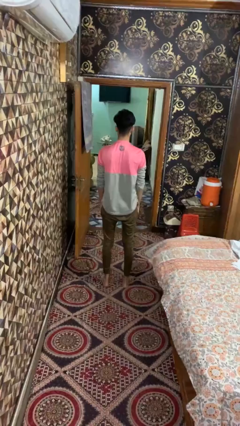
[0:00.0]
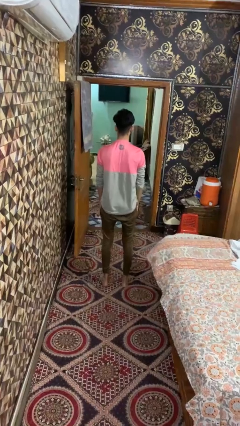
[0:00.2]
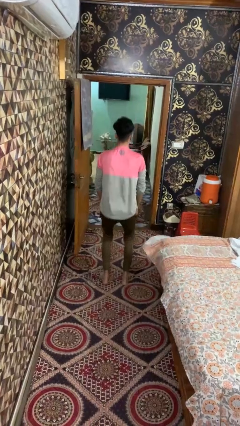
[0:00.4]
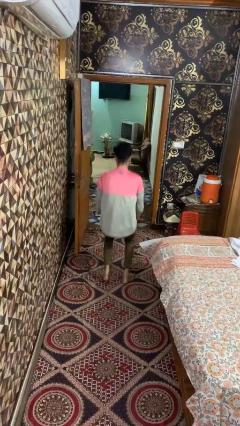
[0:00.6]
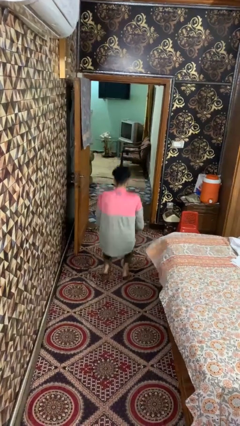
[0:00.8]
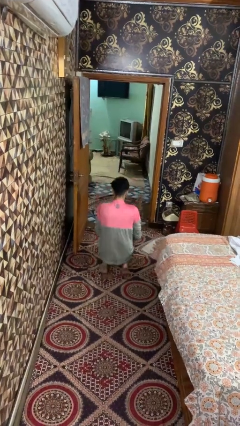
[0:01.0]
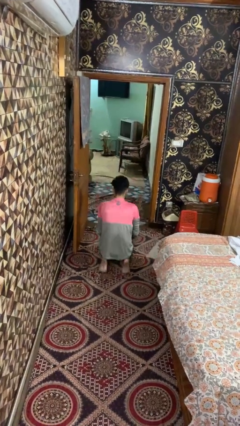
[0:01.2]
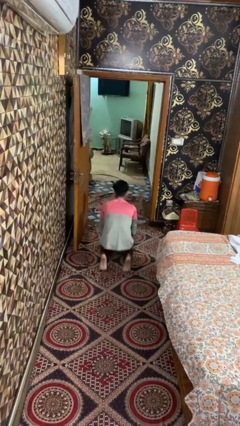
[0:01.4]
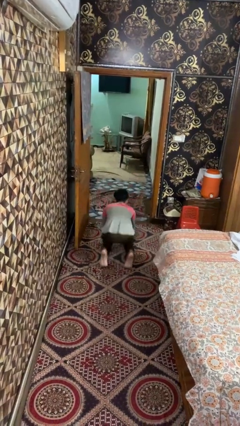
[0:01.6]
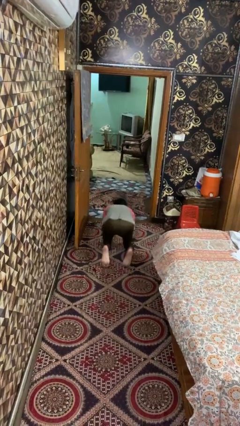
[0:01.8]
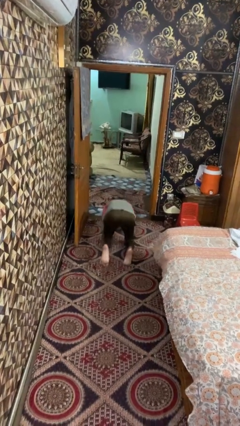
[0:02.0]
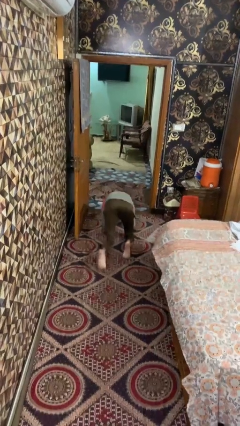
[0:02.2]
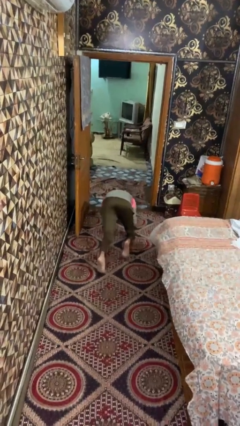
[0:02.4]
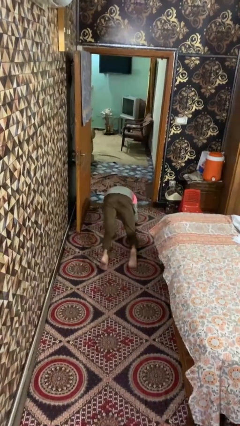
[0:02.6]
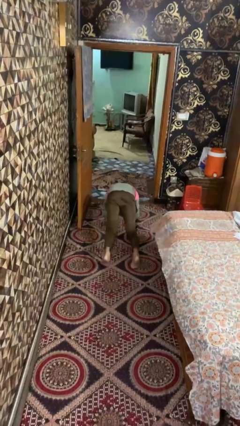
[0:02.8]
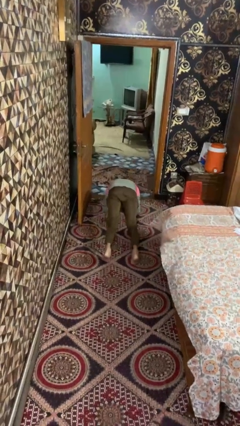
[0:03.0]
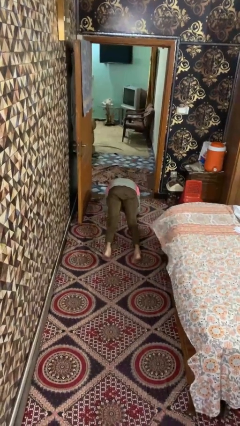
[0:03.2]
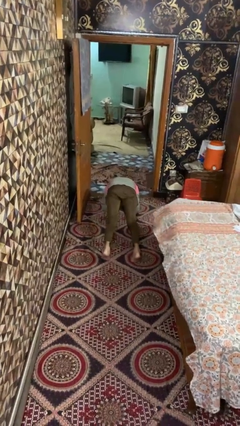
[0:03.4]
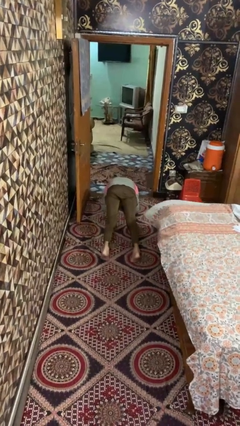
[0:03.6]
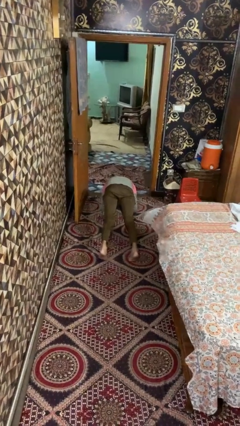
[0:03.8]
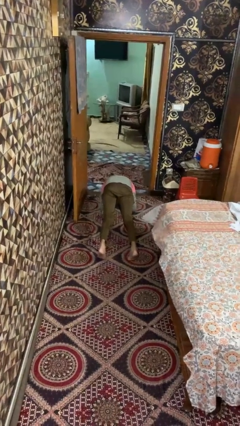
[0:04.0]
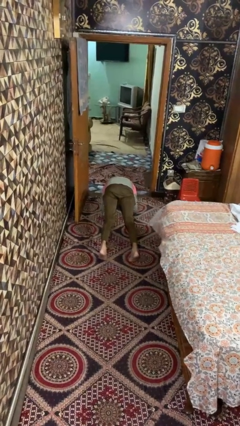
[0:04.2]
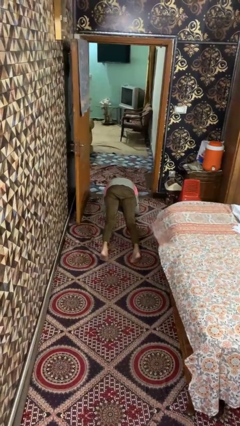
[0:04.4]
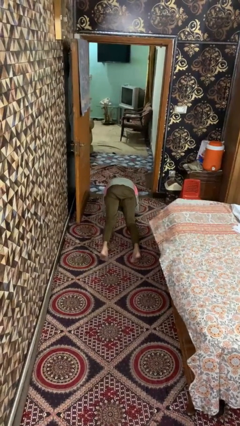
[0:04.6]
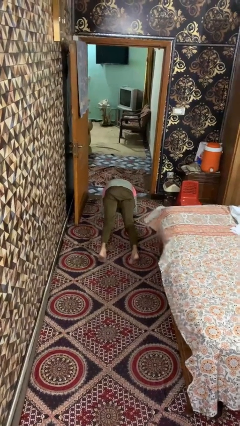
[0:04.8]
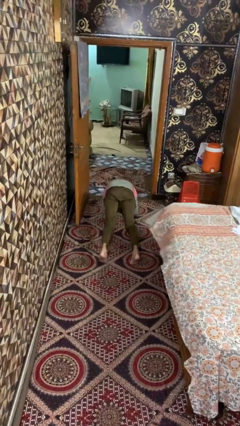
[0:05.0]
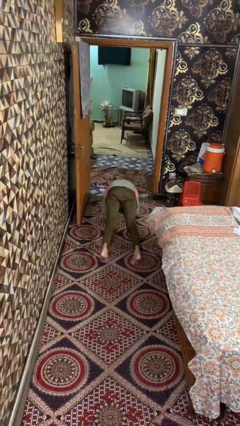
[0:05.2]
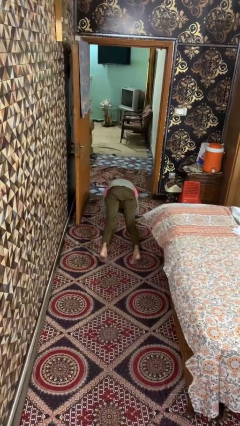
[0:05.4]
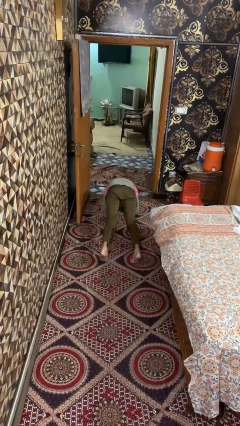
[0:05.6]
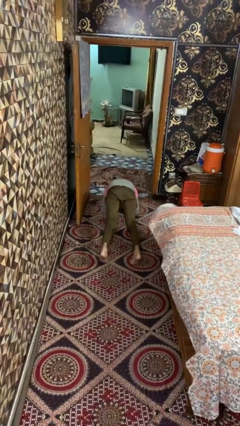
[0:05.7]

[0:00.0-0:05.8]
person exercises with plank

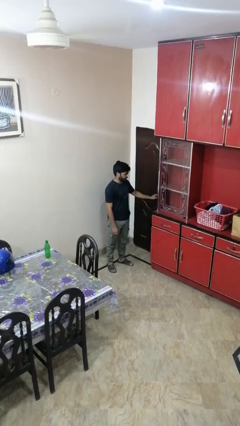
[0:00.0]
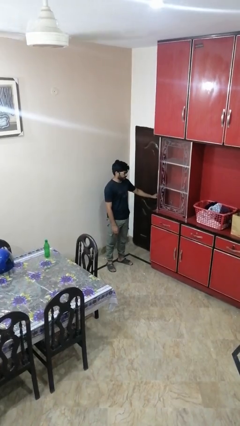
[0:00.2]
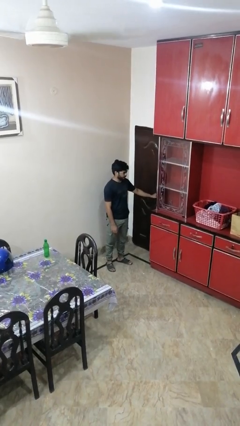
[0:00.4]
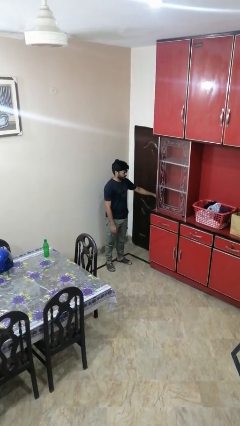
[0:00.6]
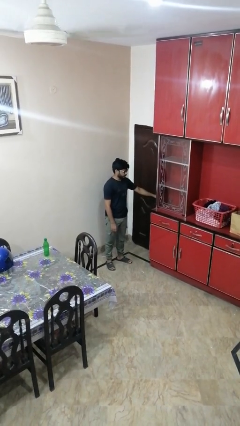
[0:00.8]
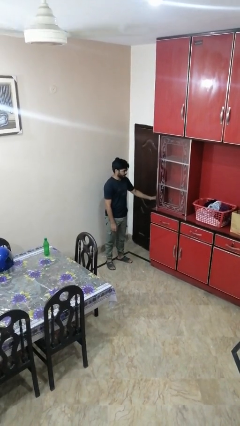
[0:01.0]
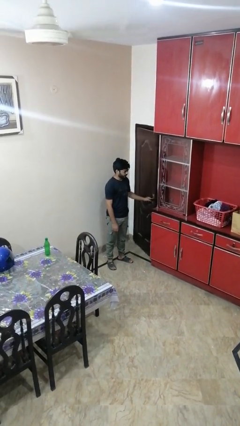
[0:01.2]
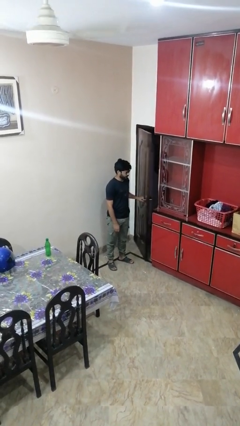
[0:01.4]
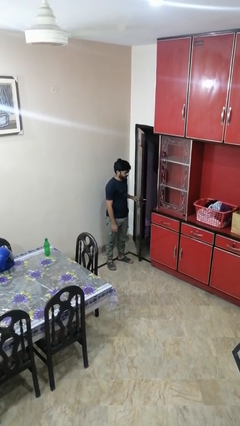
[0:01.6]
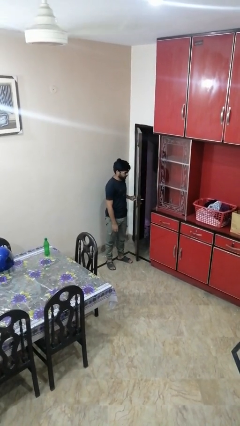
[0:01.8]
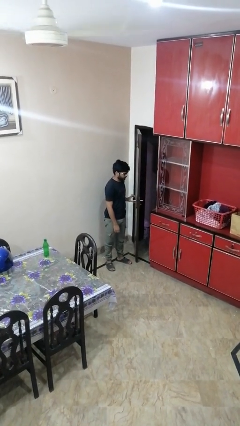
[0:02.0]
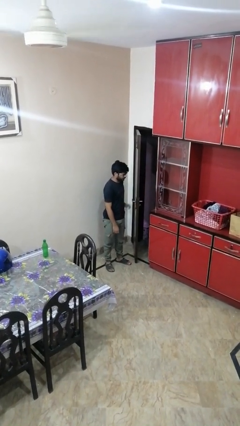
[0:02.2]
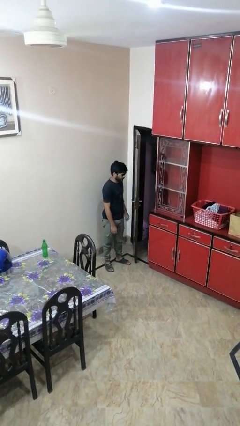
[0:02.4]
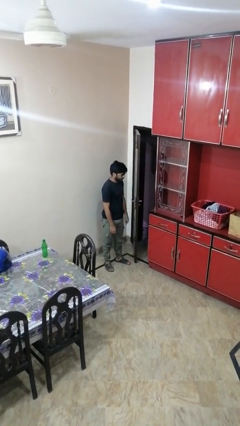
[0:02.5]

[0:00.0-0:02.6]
person opens facility door

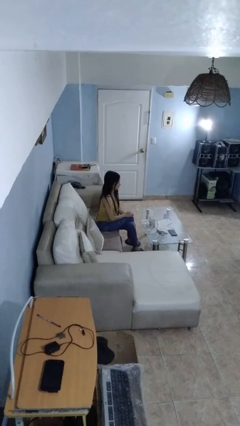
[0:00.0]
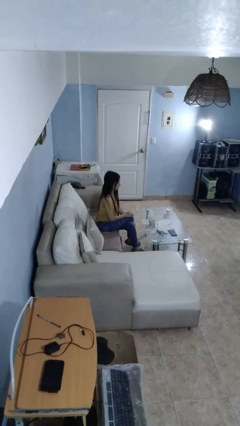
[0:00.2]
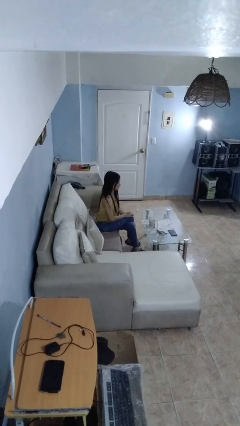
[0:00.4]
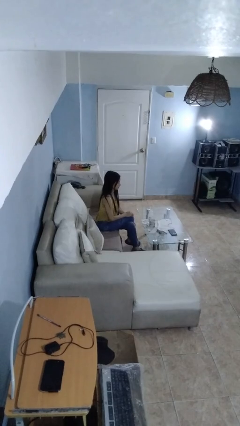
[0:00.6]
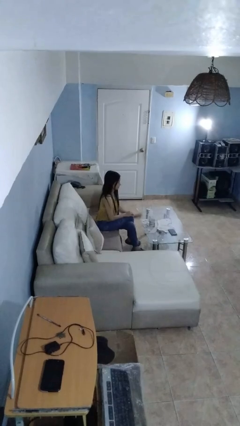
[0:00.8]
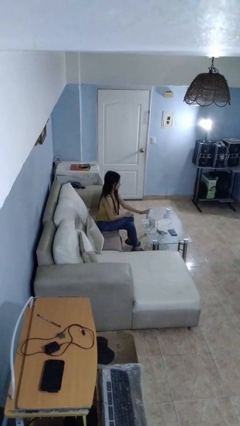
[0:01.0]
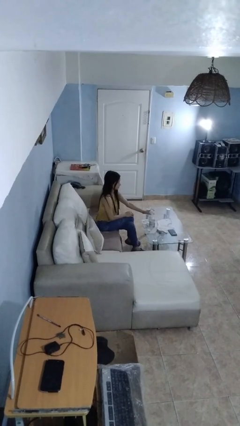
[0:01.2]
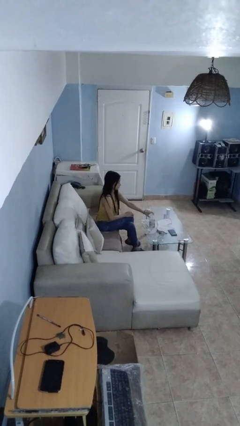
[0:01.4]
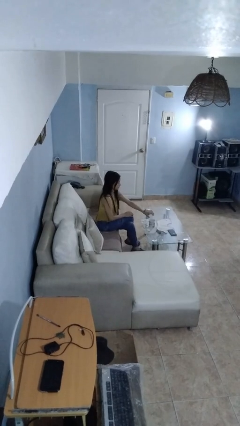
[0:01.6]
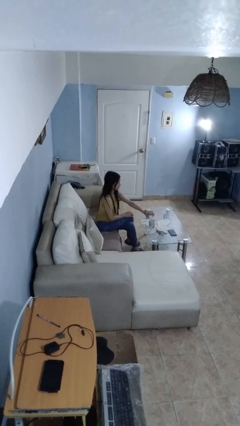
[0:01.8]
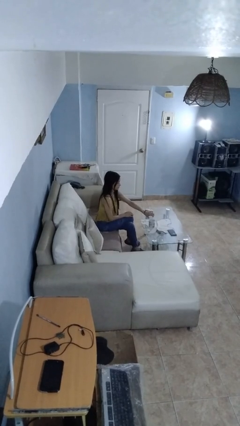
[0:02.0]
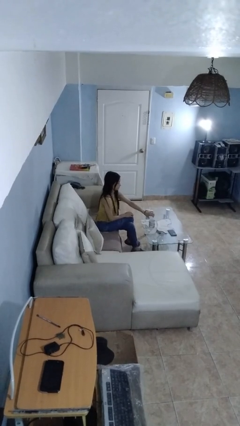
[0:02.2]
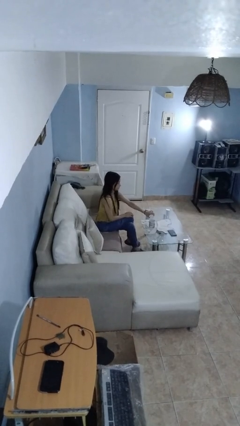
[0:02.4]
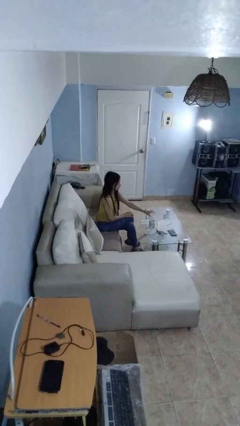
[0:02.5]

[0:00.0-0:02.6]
person pours liquid into cup

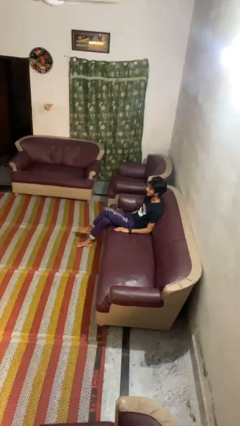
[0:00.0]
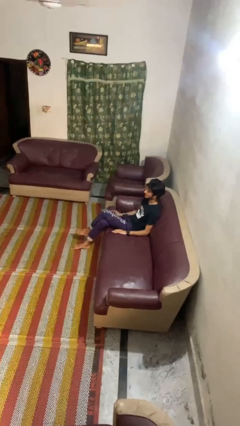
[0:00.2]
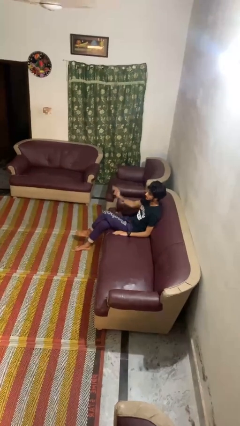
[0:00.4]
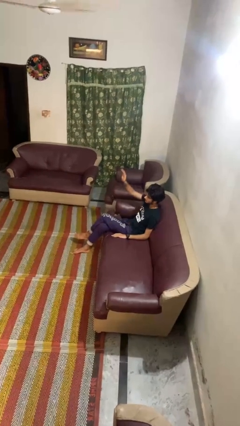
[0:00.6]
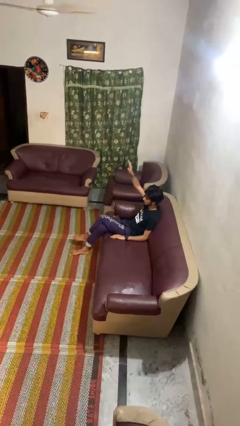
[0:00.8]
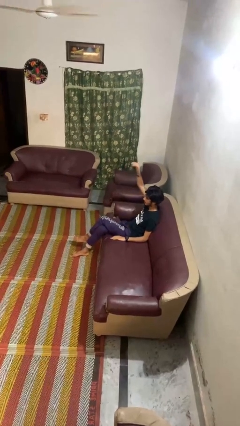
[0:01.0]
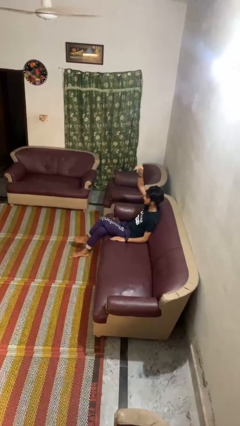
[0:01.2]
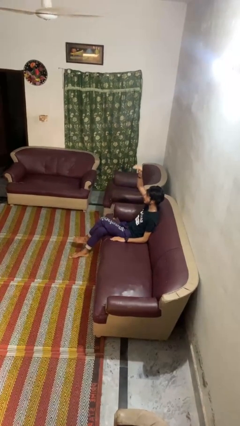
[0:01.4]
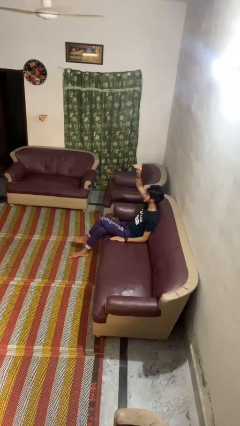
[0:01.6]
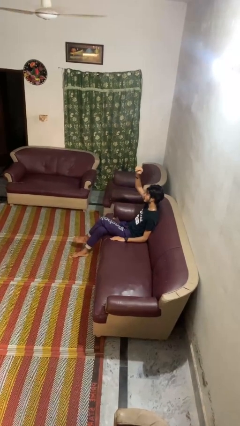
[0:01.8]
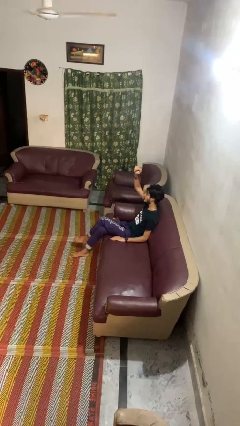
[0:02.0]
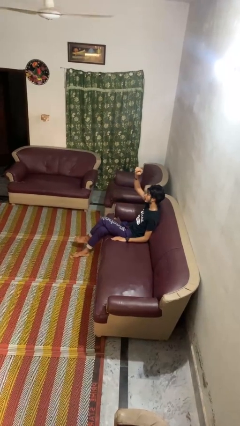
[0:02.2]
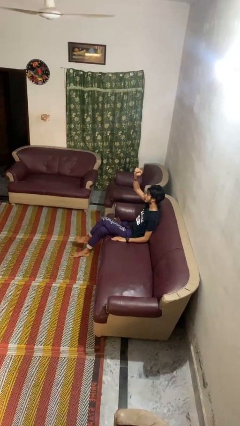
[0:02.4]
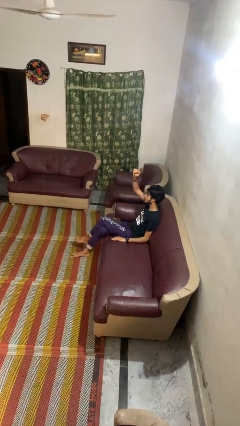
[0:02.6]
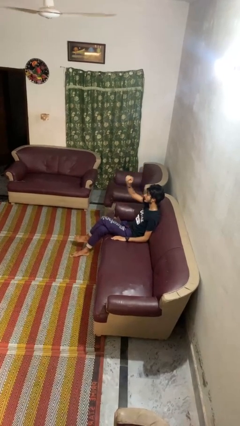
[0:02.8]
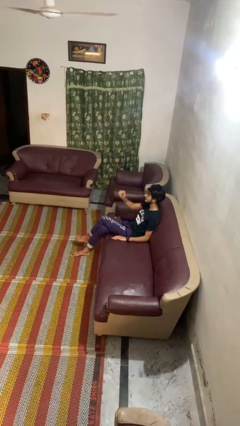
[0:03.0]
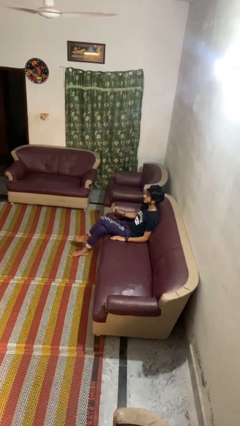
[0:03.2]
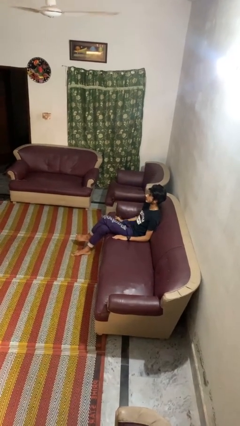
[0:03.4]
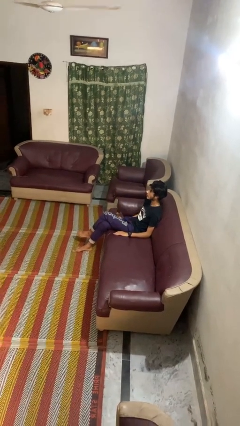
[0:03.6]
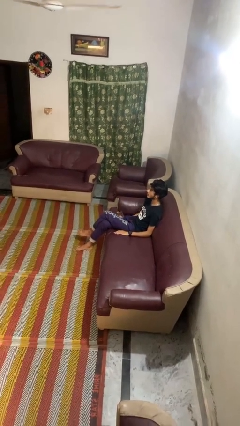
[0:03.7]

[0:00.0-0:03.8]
person gestures come here

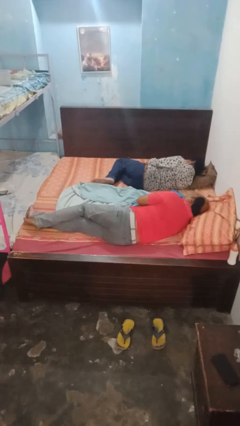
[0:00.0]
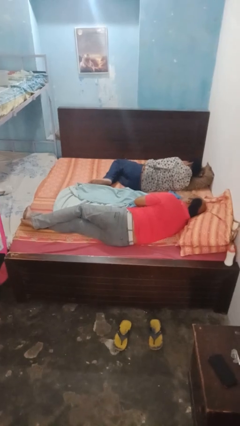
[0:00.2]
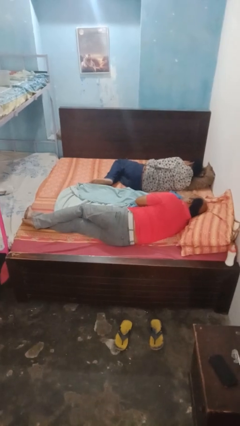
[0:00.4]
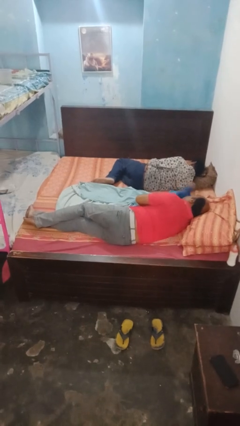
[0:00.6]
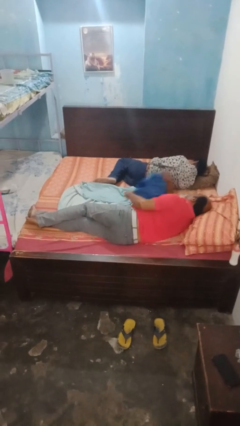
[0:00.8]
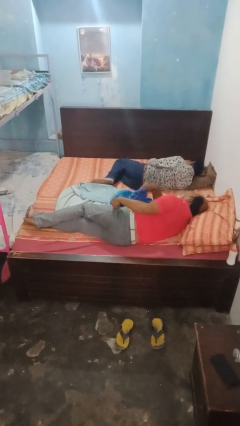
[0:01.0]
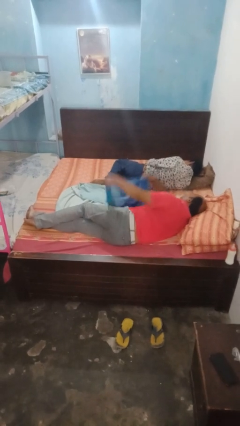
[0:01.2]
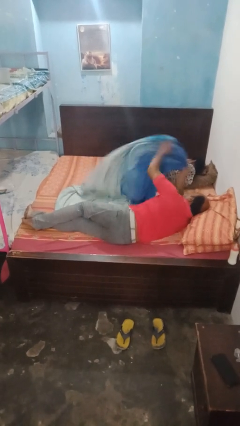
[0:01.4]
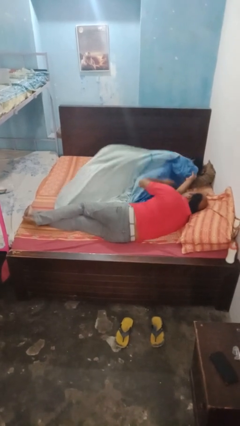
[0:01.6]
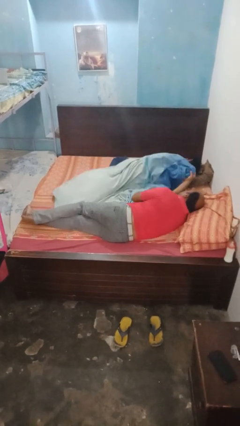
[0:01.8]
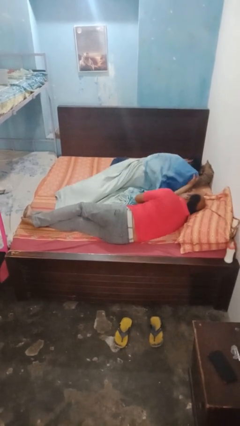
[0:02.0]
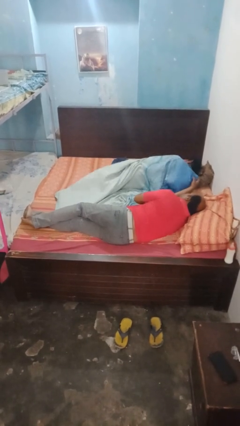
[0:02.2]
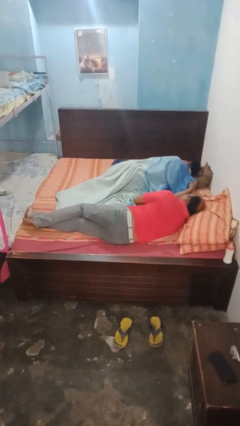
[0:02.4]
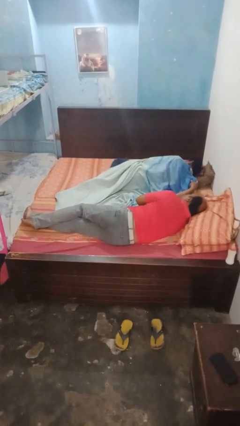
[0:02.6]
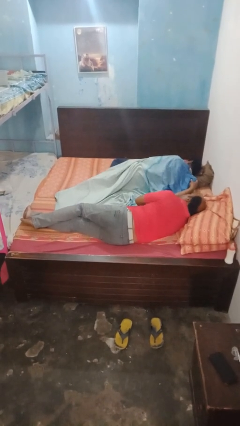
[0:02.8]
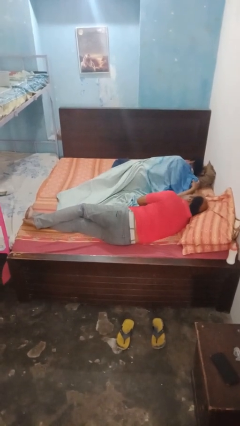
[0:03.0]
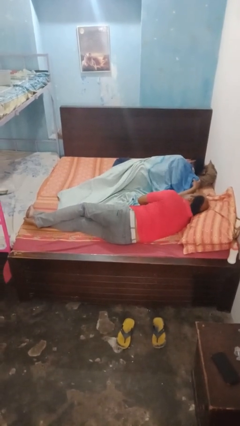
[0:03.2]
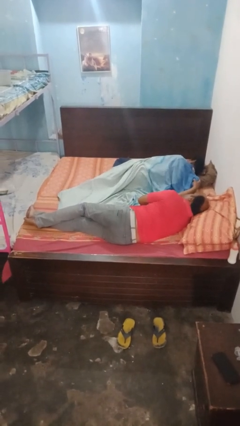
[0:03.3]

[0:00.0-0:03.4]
person covers friend with blanket
